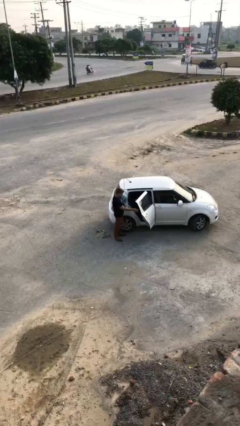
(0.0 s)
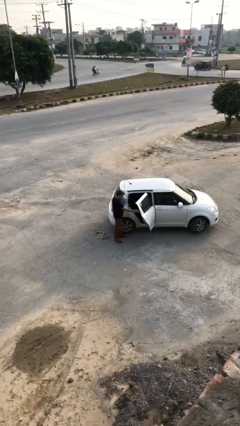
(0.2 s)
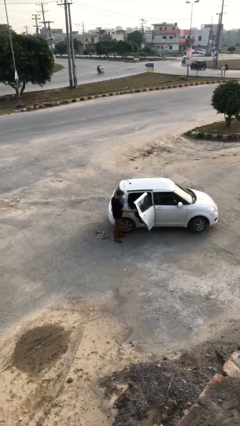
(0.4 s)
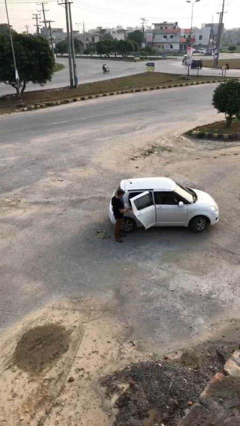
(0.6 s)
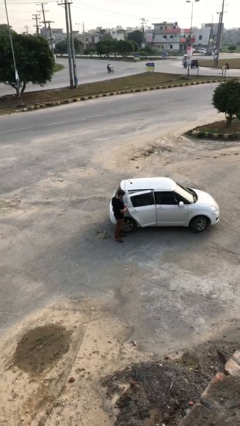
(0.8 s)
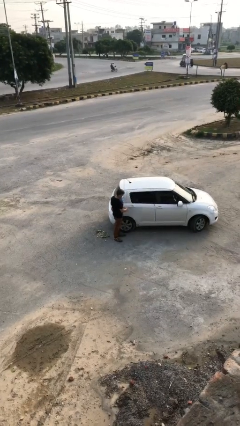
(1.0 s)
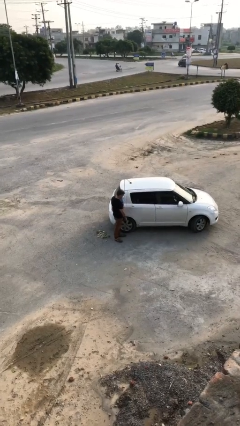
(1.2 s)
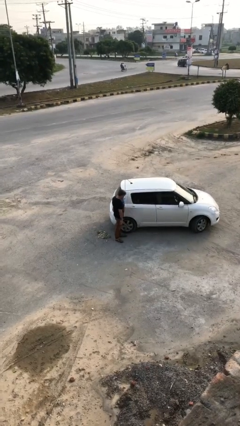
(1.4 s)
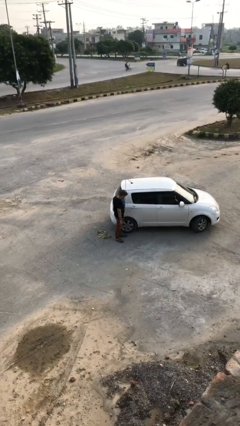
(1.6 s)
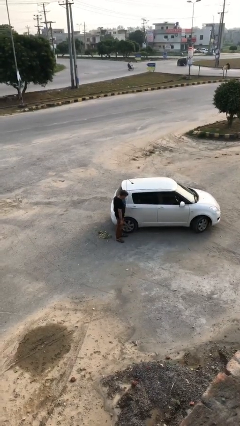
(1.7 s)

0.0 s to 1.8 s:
person closes car door

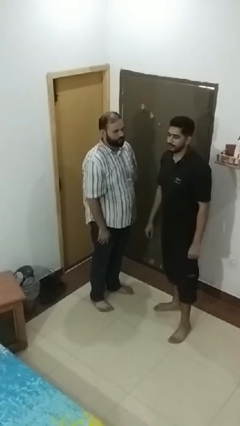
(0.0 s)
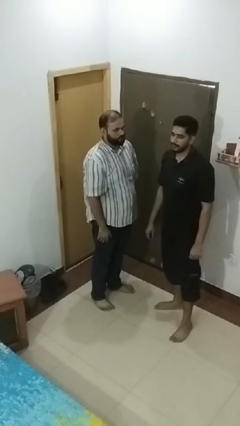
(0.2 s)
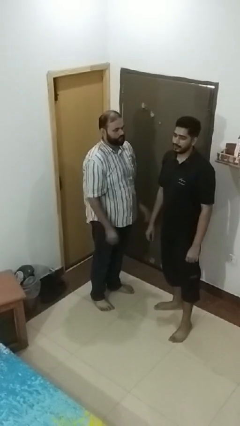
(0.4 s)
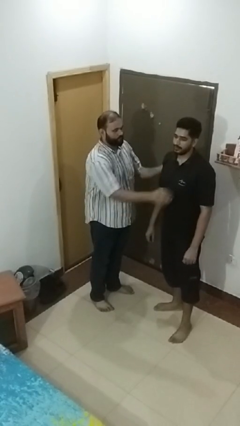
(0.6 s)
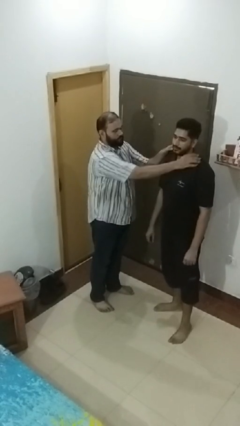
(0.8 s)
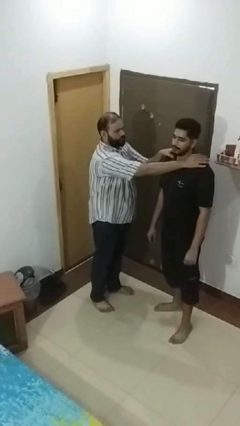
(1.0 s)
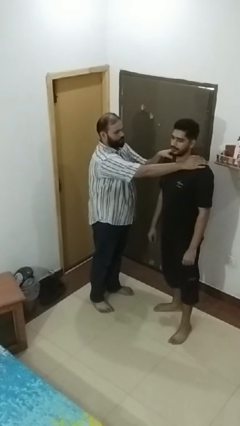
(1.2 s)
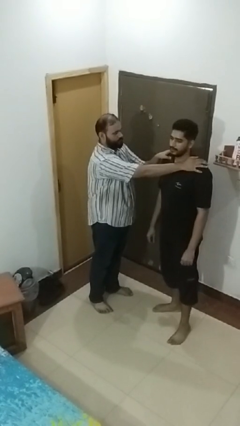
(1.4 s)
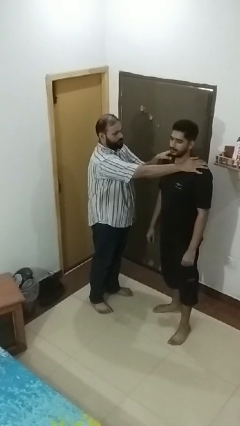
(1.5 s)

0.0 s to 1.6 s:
person grabs person by shoulder

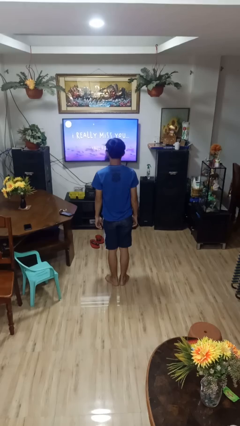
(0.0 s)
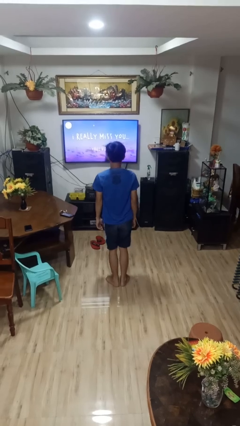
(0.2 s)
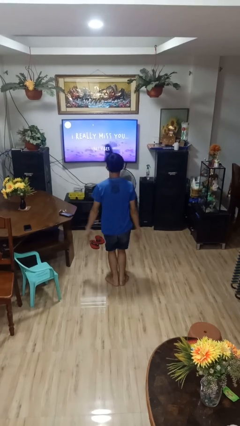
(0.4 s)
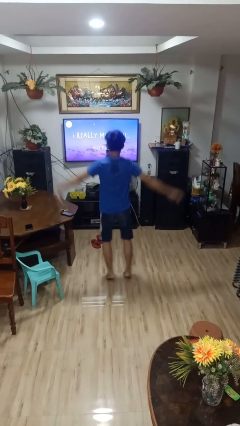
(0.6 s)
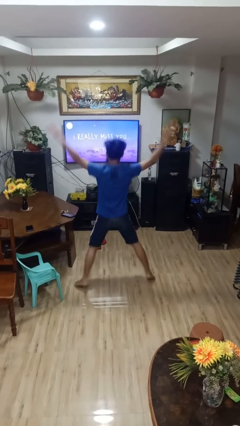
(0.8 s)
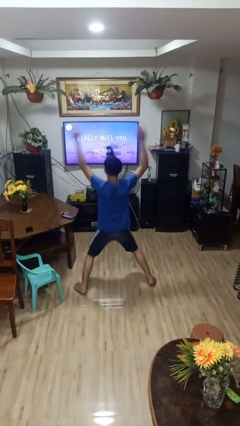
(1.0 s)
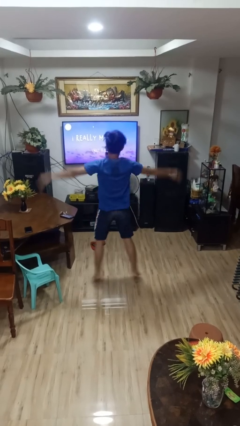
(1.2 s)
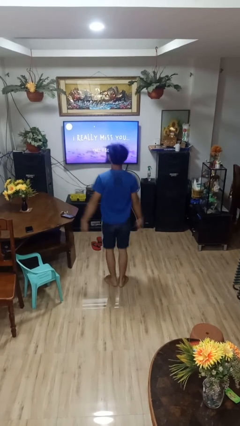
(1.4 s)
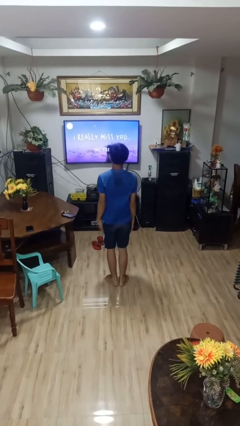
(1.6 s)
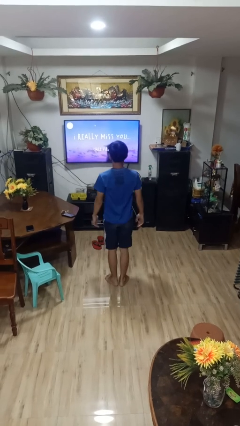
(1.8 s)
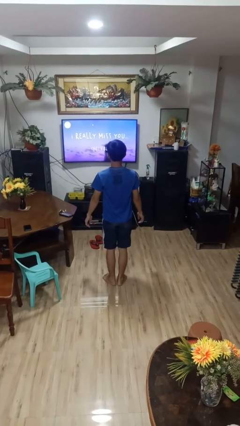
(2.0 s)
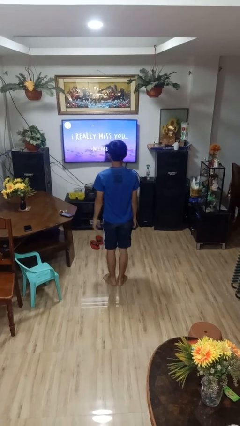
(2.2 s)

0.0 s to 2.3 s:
person exercises with jumping jacks

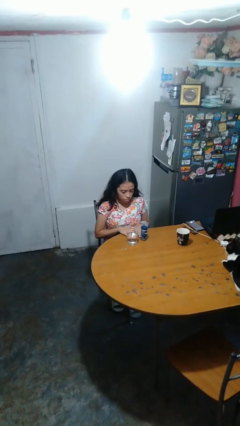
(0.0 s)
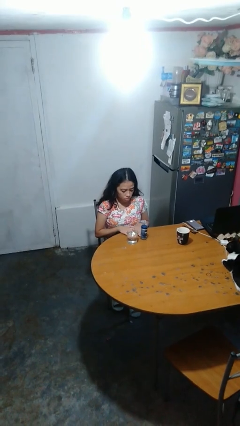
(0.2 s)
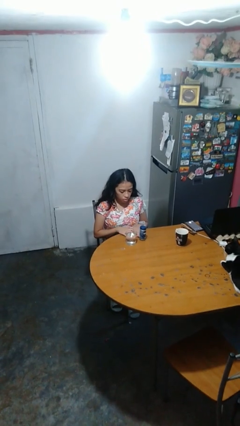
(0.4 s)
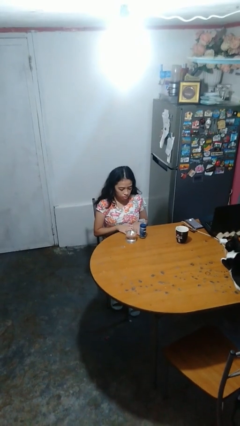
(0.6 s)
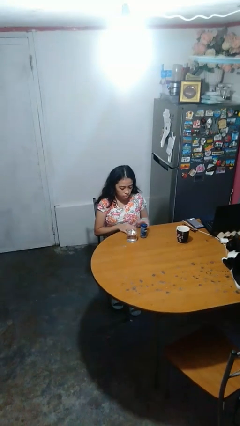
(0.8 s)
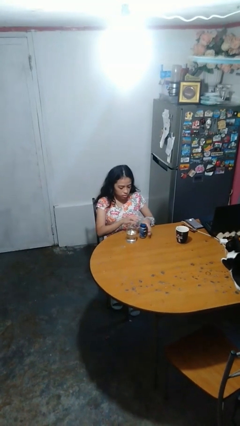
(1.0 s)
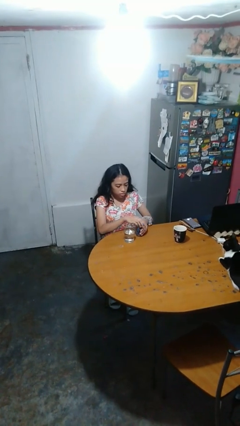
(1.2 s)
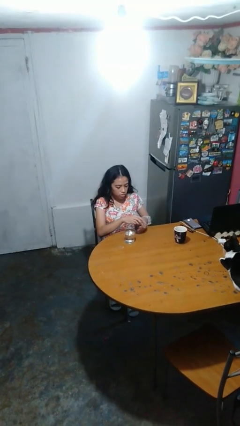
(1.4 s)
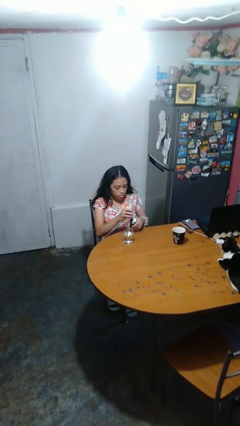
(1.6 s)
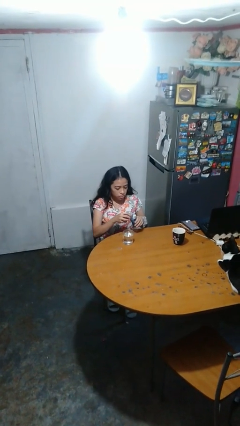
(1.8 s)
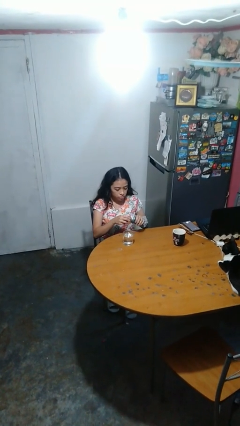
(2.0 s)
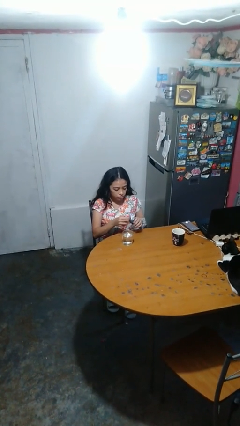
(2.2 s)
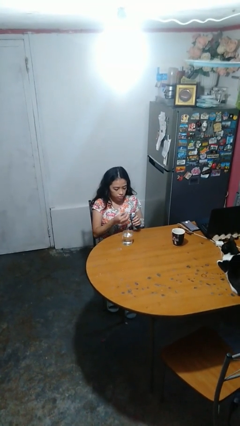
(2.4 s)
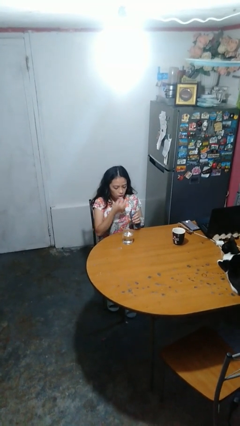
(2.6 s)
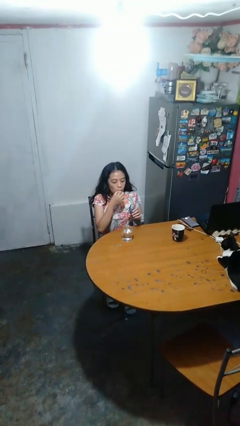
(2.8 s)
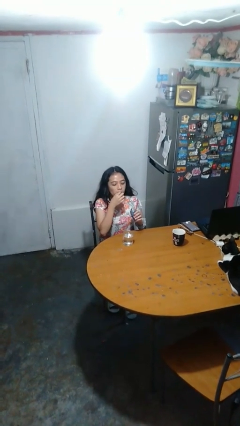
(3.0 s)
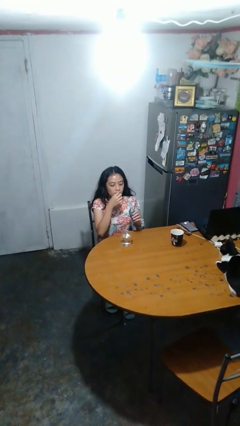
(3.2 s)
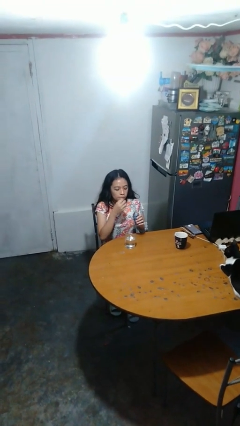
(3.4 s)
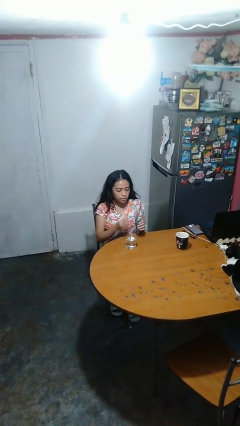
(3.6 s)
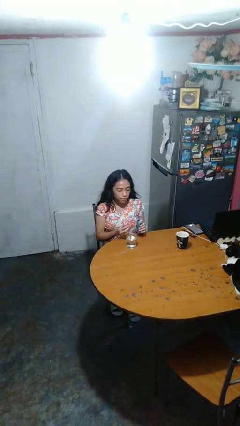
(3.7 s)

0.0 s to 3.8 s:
person takes medicine pills

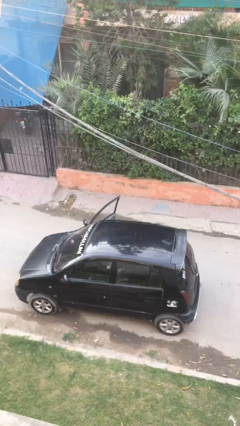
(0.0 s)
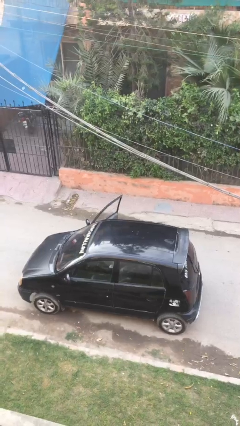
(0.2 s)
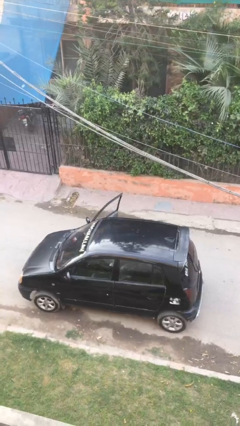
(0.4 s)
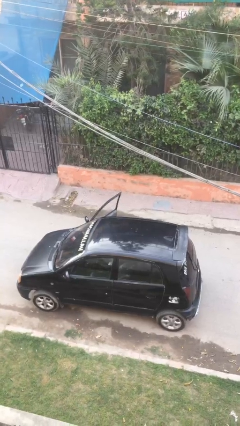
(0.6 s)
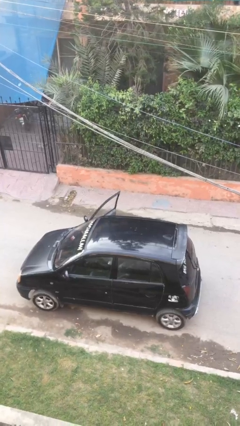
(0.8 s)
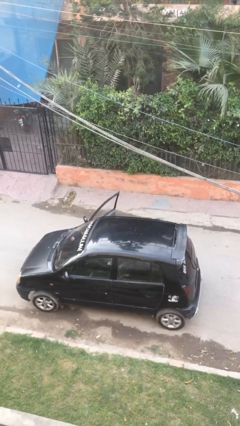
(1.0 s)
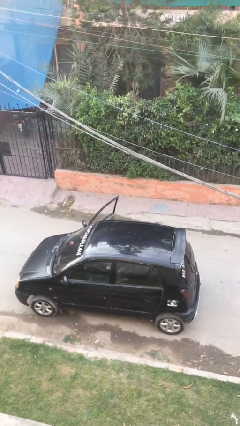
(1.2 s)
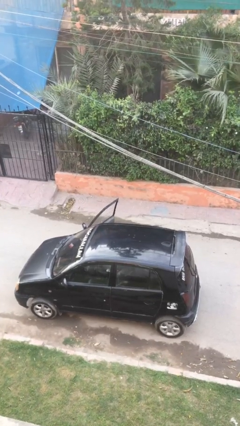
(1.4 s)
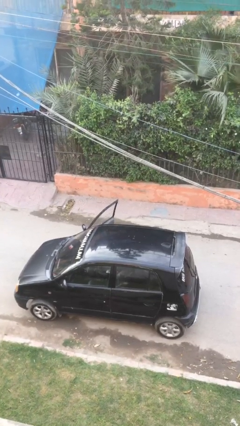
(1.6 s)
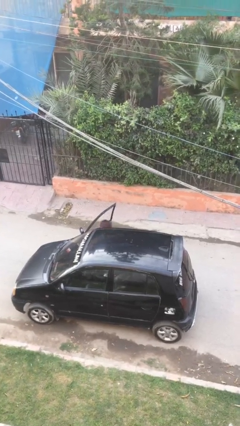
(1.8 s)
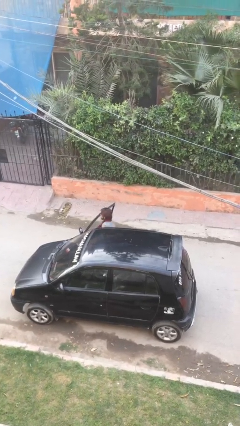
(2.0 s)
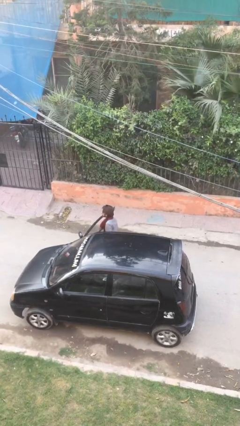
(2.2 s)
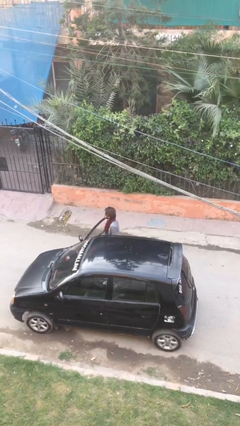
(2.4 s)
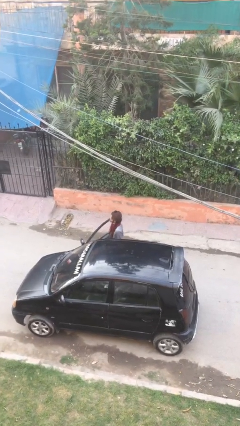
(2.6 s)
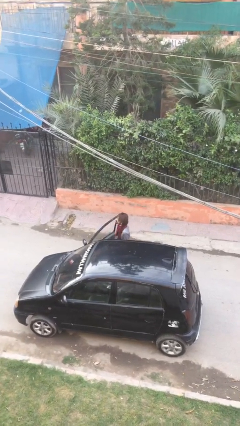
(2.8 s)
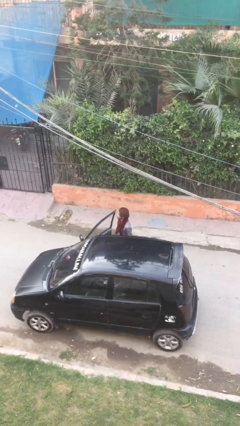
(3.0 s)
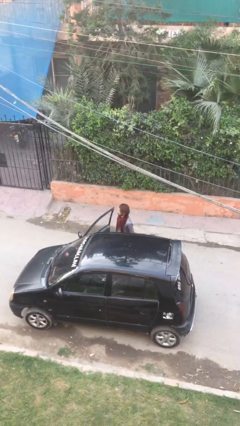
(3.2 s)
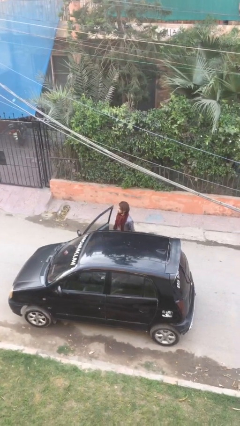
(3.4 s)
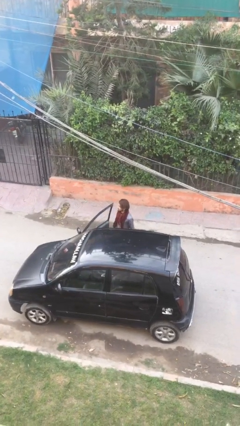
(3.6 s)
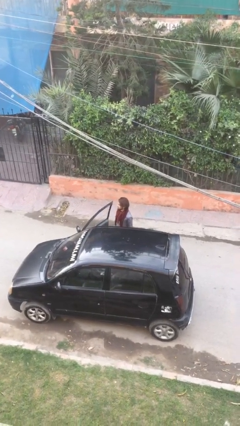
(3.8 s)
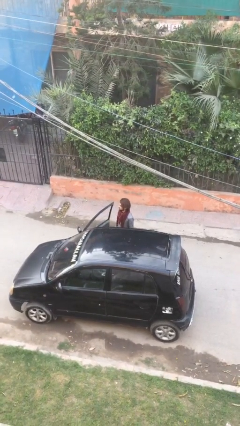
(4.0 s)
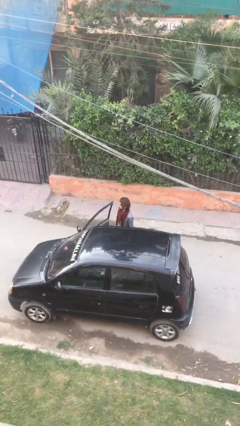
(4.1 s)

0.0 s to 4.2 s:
person exits car

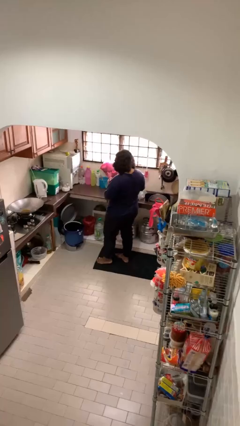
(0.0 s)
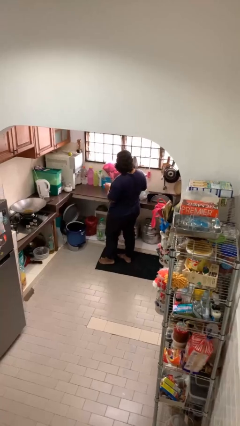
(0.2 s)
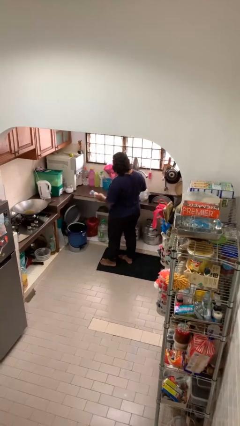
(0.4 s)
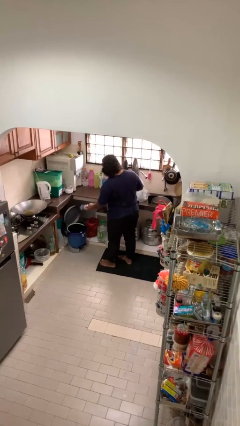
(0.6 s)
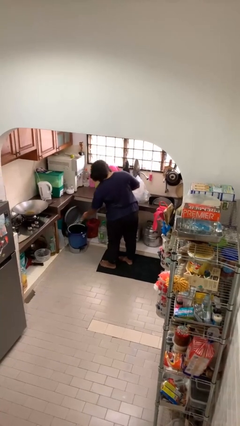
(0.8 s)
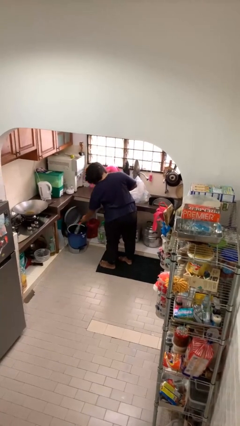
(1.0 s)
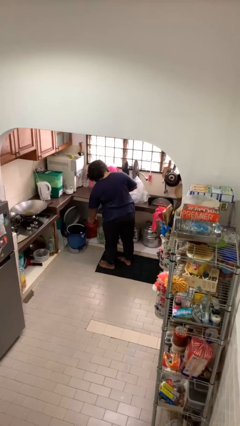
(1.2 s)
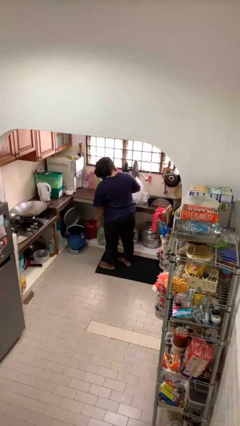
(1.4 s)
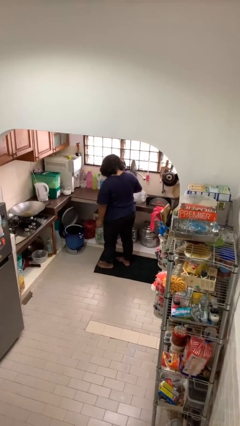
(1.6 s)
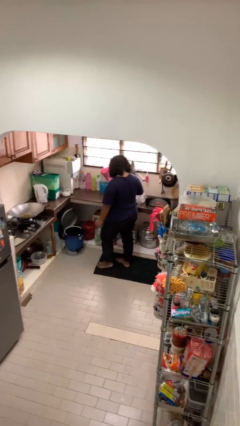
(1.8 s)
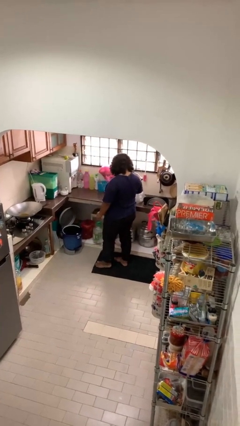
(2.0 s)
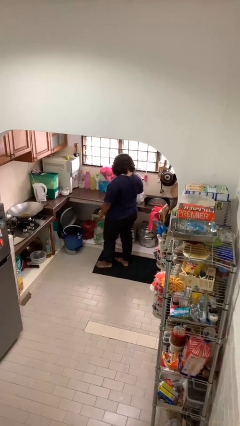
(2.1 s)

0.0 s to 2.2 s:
person discards trash

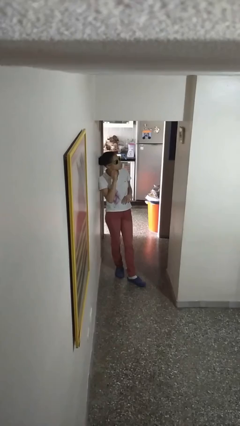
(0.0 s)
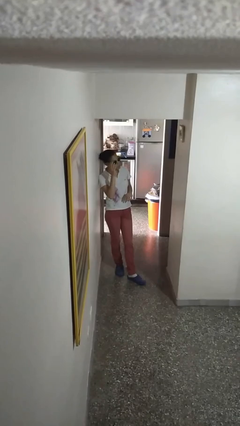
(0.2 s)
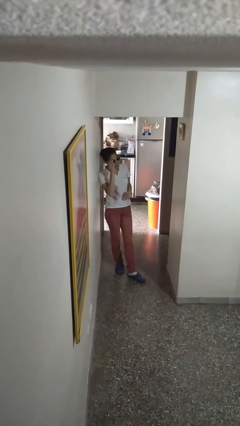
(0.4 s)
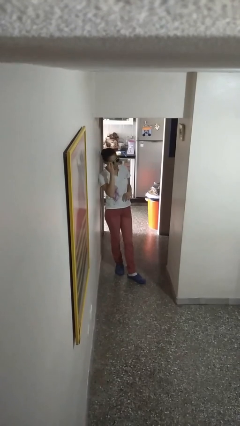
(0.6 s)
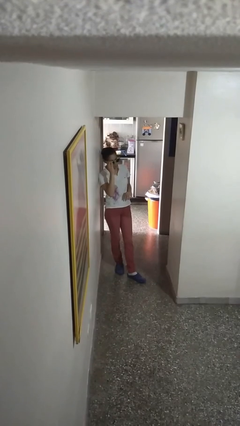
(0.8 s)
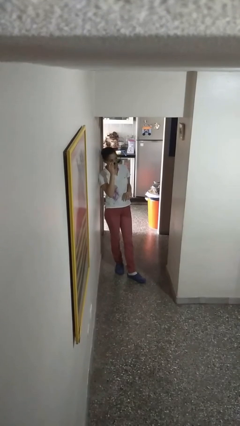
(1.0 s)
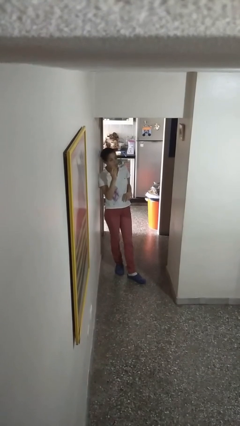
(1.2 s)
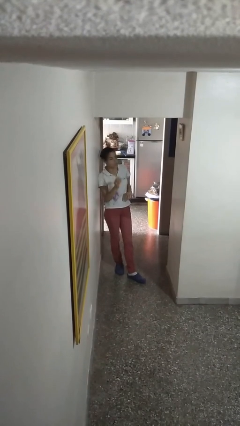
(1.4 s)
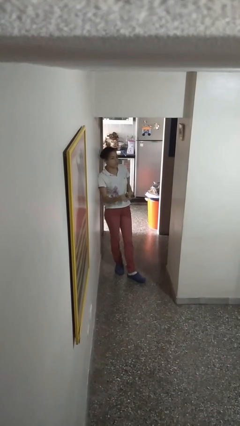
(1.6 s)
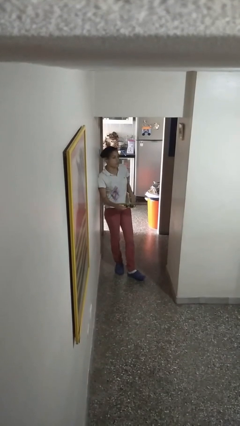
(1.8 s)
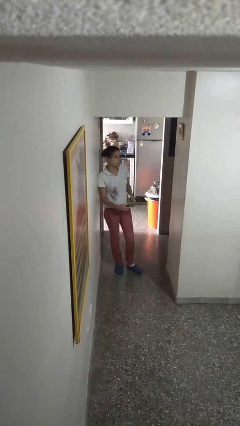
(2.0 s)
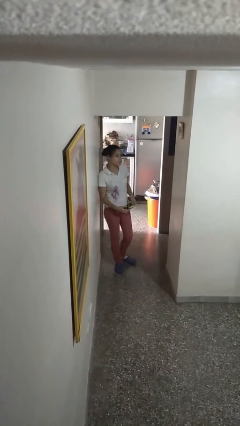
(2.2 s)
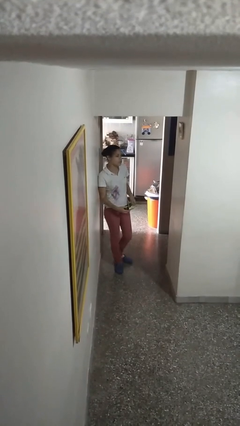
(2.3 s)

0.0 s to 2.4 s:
person takes off sunglasses
